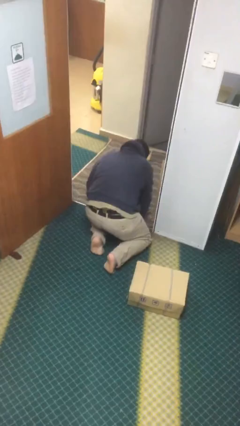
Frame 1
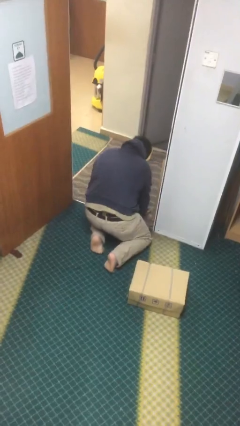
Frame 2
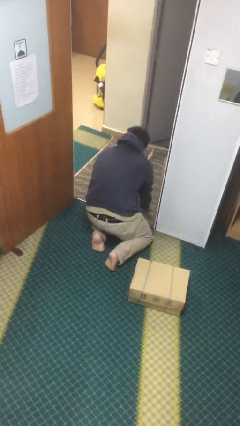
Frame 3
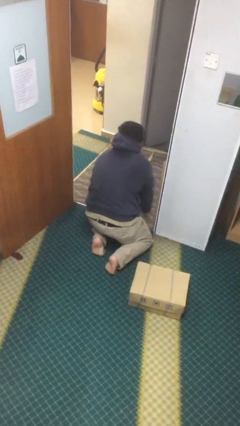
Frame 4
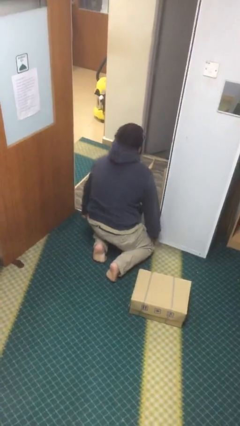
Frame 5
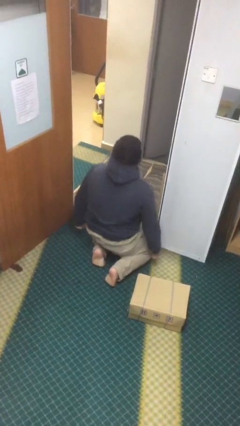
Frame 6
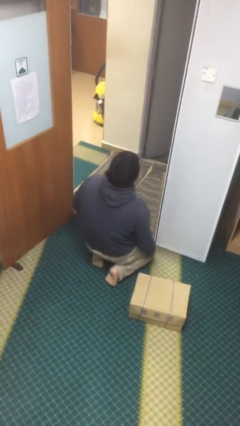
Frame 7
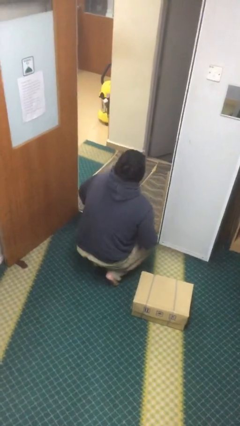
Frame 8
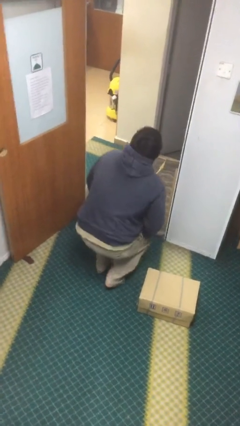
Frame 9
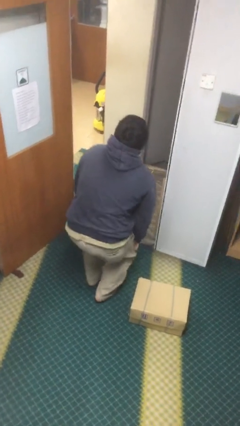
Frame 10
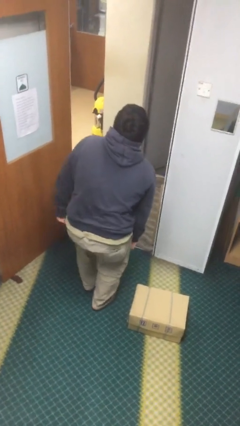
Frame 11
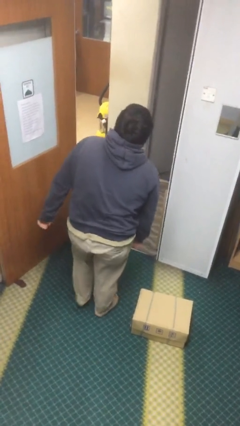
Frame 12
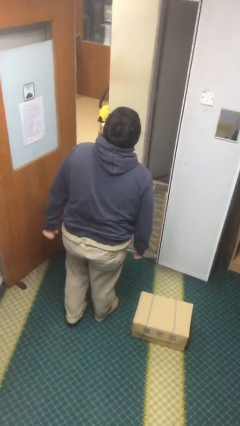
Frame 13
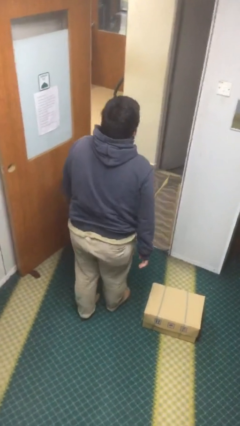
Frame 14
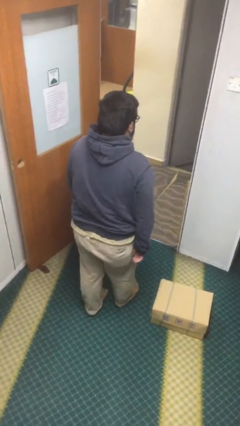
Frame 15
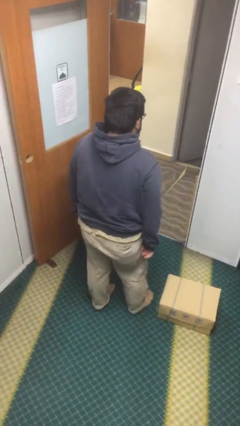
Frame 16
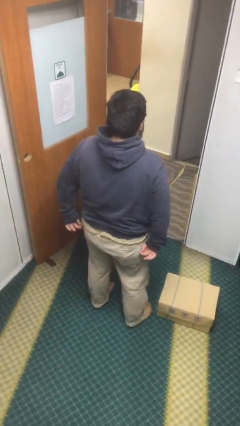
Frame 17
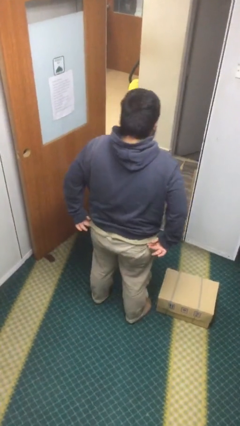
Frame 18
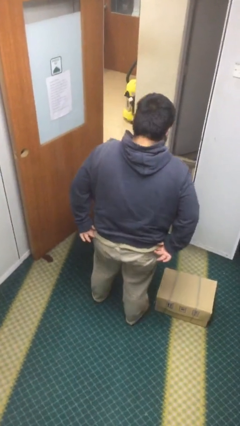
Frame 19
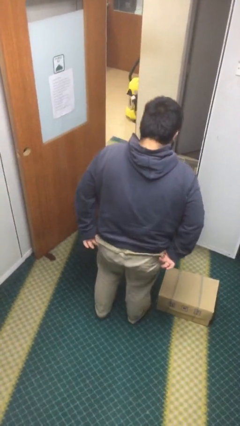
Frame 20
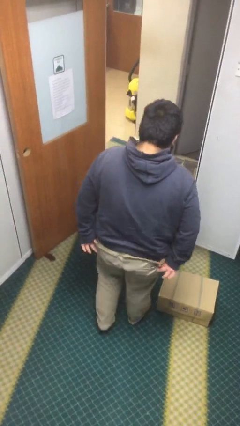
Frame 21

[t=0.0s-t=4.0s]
person stands up from floor

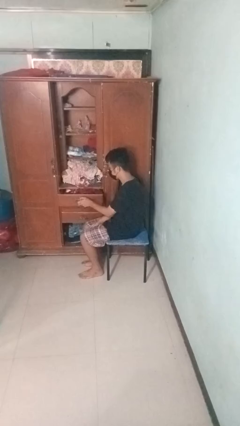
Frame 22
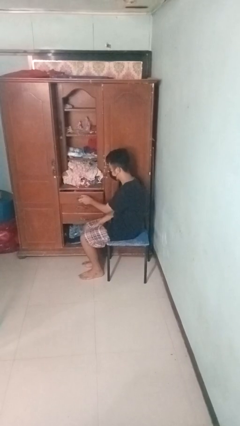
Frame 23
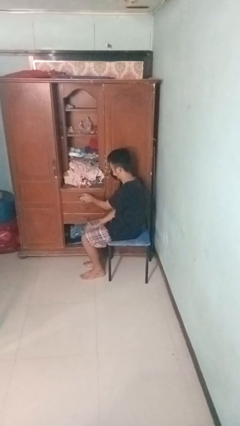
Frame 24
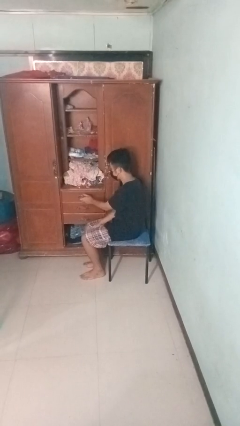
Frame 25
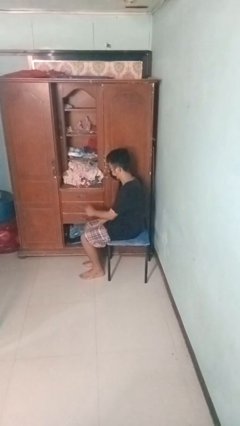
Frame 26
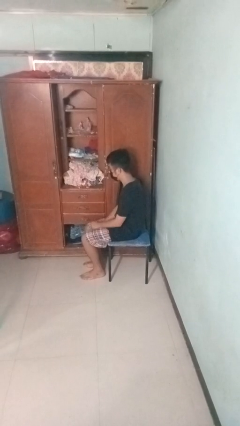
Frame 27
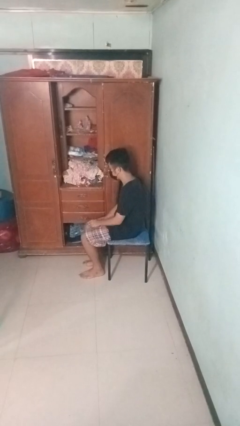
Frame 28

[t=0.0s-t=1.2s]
person closes dresser drawer

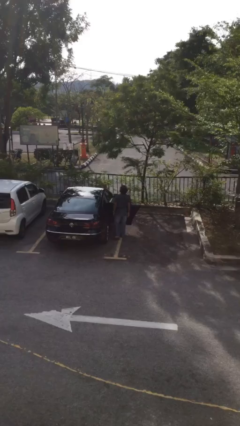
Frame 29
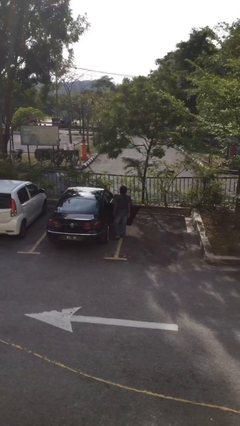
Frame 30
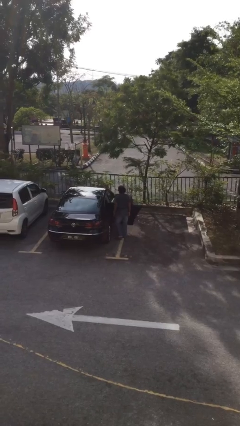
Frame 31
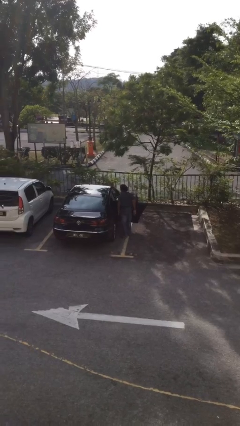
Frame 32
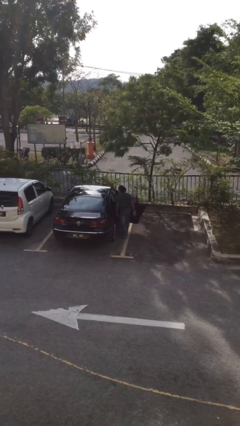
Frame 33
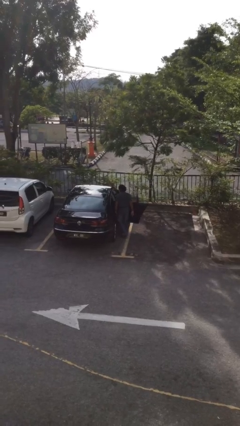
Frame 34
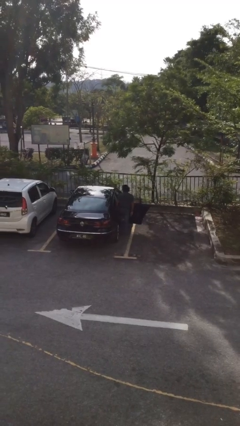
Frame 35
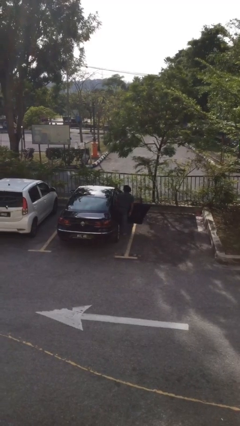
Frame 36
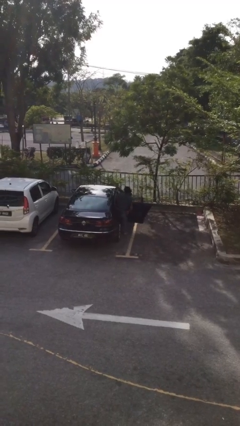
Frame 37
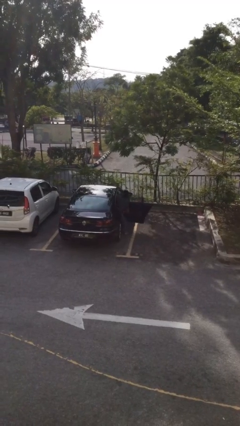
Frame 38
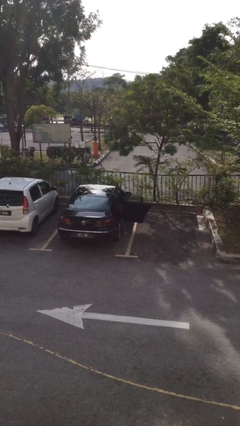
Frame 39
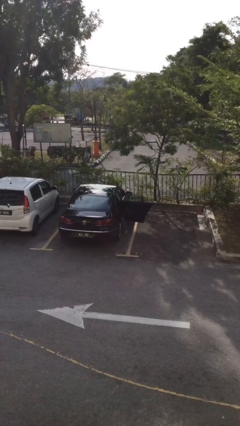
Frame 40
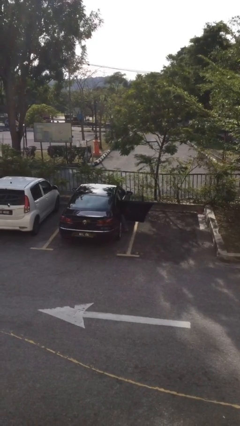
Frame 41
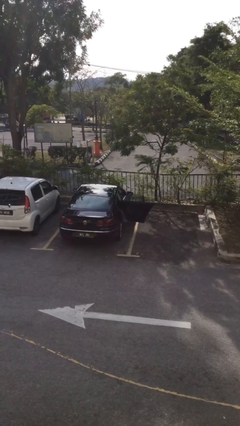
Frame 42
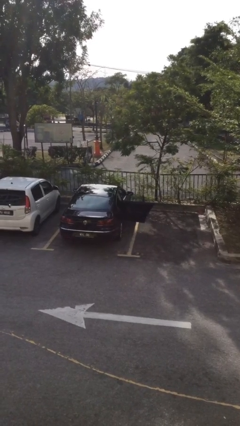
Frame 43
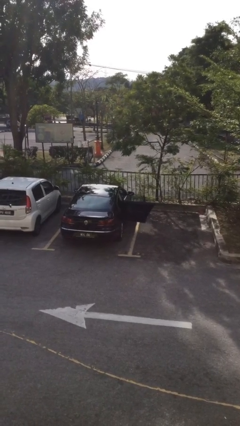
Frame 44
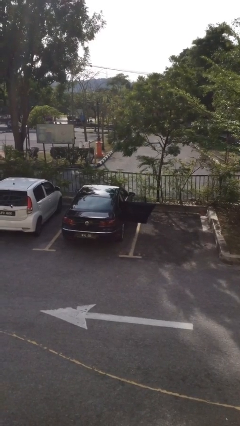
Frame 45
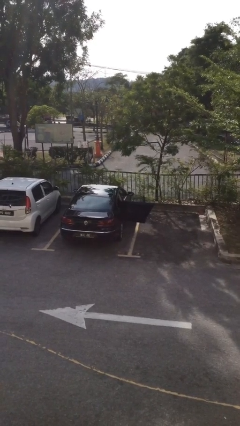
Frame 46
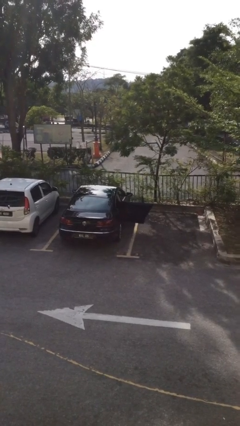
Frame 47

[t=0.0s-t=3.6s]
person enters car

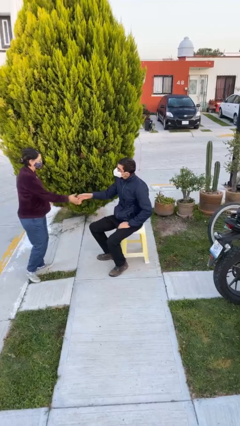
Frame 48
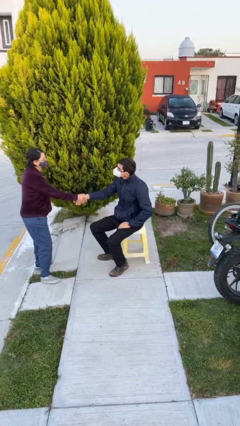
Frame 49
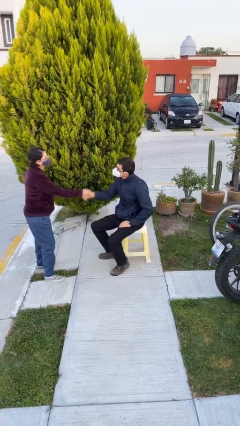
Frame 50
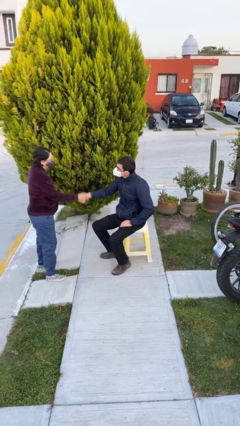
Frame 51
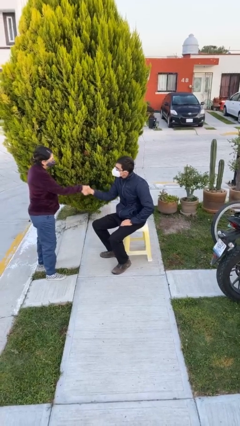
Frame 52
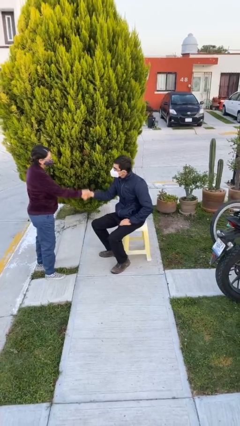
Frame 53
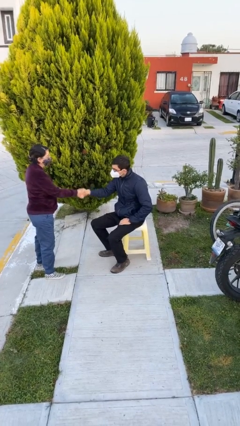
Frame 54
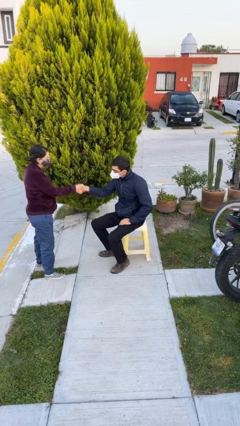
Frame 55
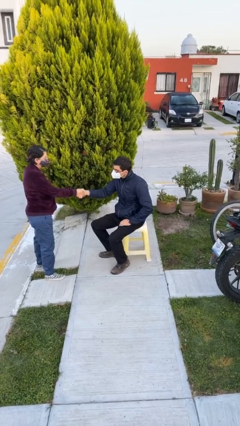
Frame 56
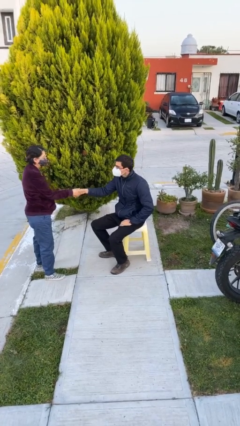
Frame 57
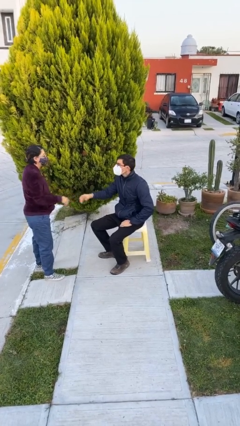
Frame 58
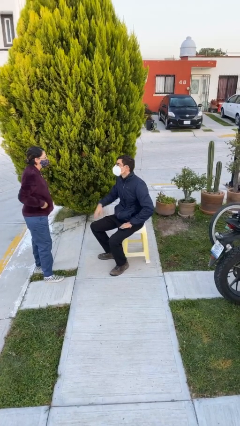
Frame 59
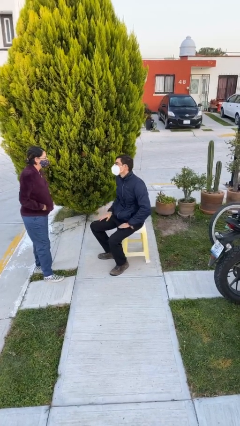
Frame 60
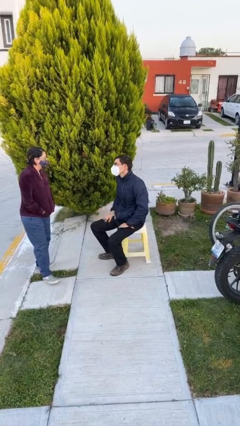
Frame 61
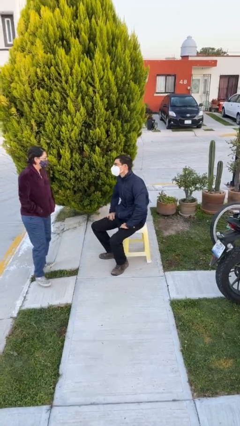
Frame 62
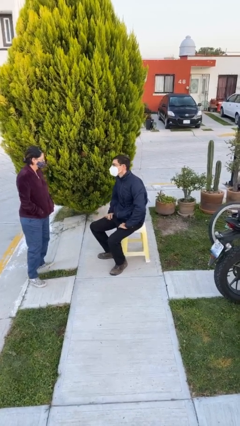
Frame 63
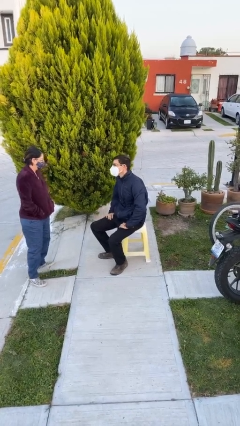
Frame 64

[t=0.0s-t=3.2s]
person shakes hand

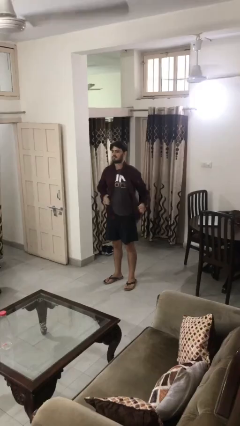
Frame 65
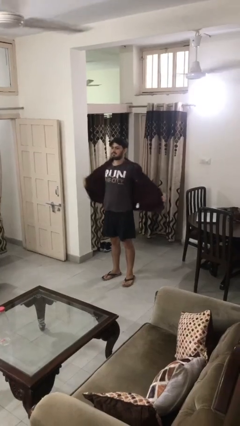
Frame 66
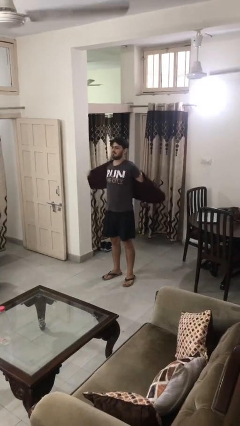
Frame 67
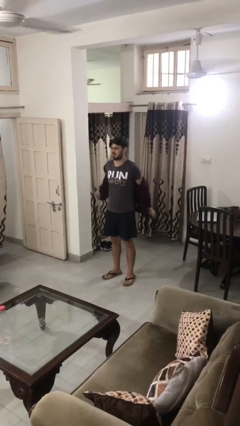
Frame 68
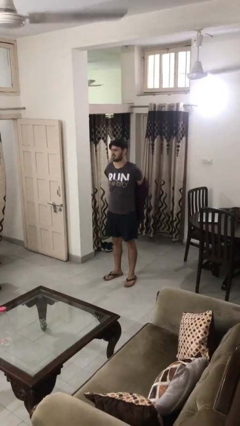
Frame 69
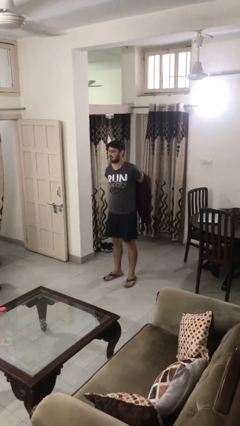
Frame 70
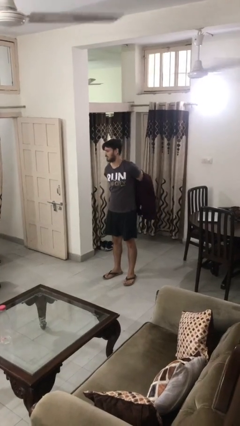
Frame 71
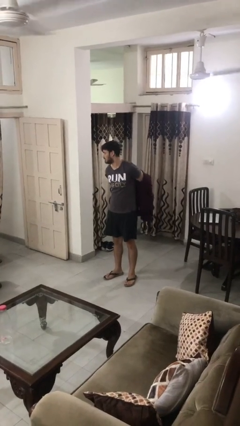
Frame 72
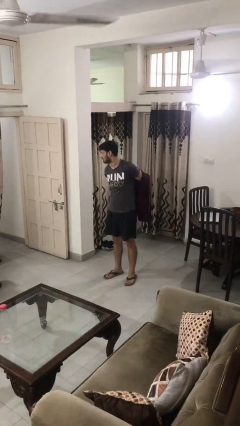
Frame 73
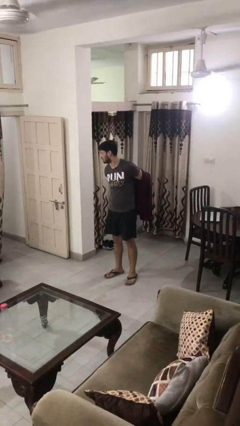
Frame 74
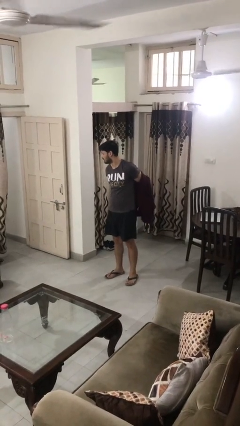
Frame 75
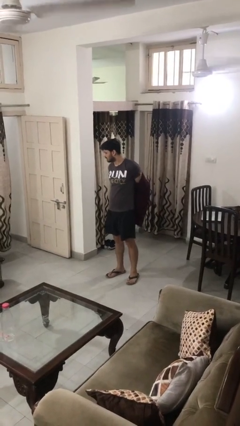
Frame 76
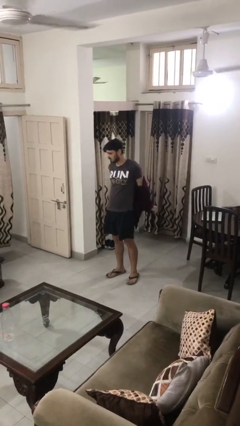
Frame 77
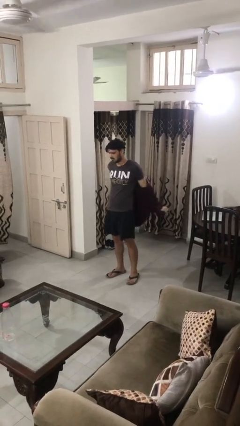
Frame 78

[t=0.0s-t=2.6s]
person takes off jacket

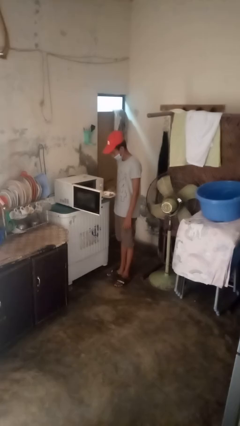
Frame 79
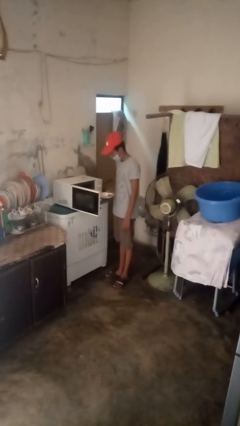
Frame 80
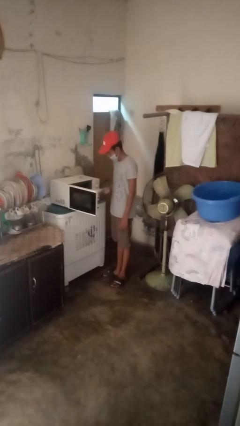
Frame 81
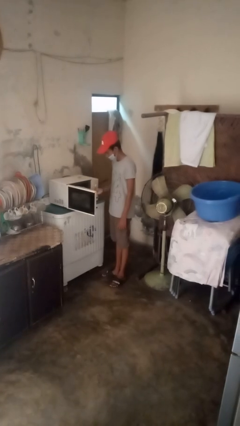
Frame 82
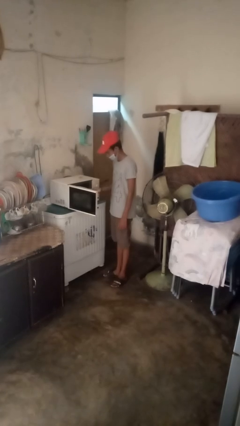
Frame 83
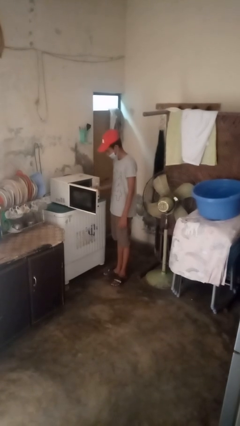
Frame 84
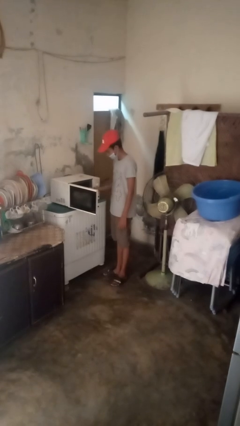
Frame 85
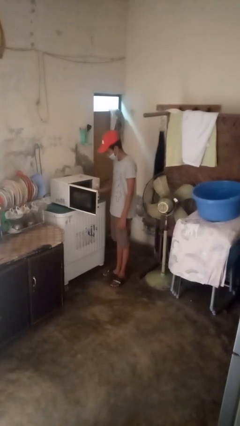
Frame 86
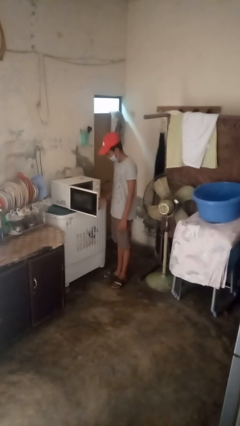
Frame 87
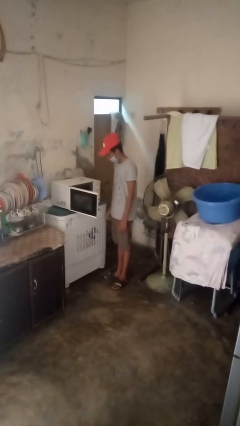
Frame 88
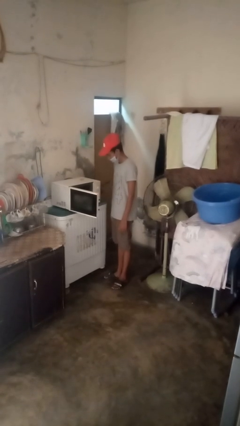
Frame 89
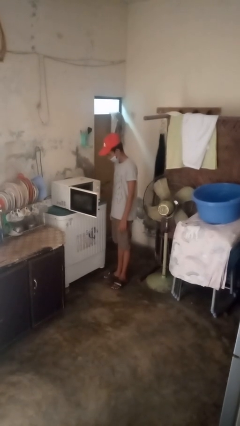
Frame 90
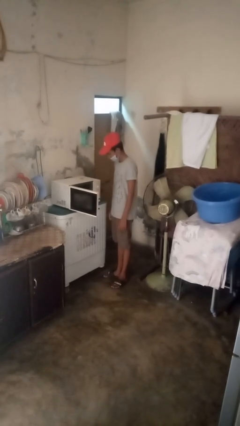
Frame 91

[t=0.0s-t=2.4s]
person puts object into microwave

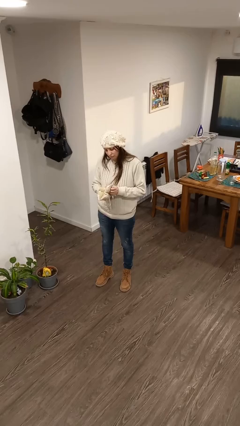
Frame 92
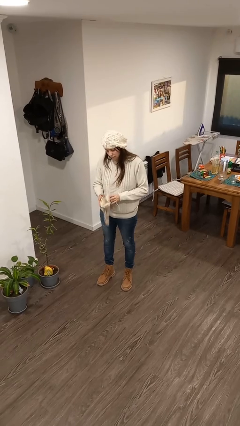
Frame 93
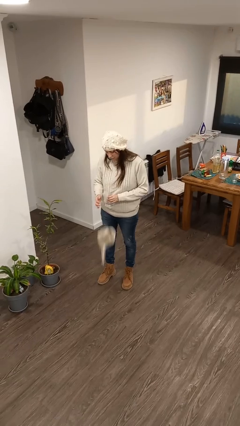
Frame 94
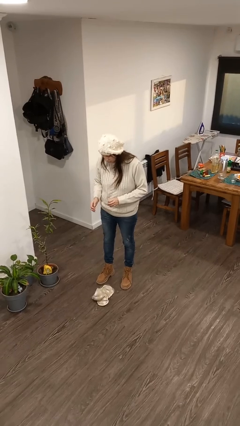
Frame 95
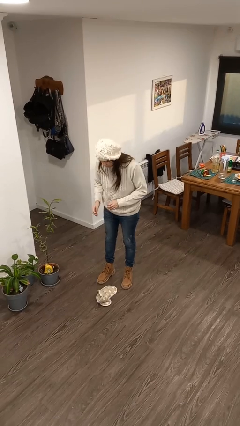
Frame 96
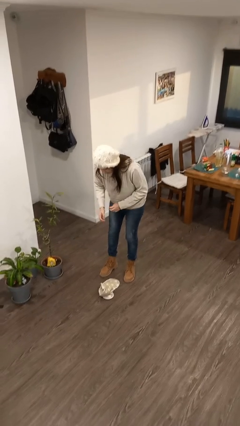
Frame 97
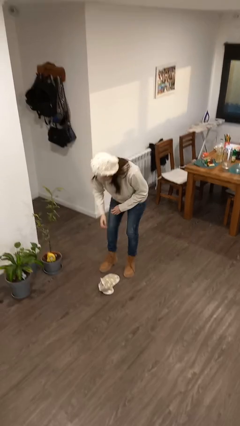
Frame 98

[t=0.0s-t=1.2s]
person drops object
